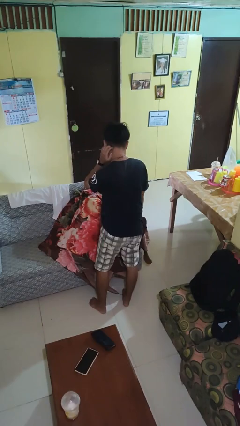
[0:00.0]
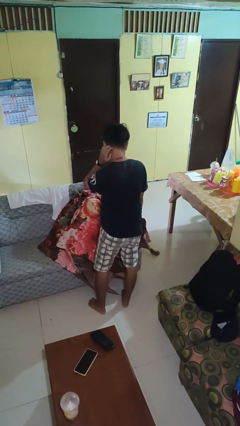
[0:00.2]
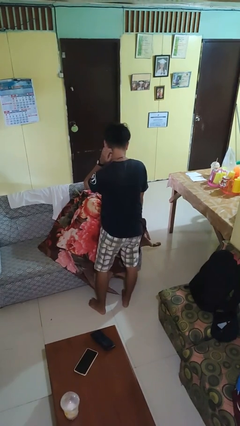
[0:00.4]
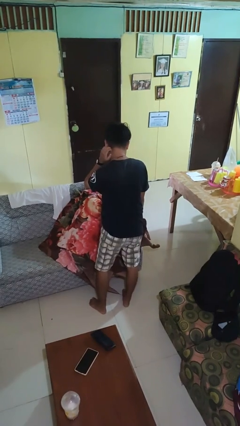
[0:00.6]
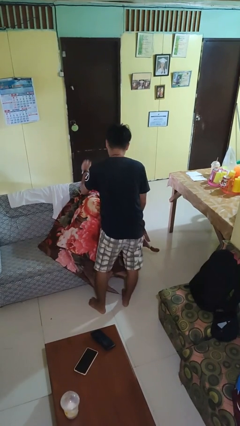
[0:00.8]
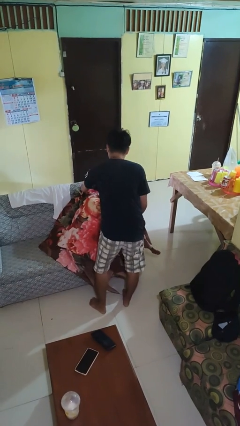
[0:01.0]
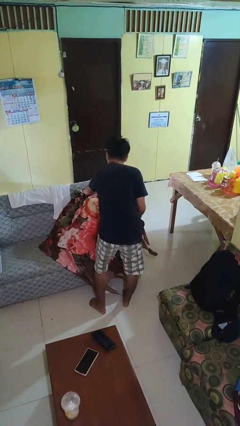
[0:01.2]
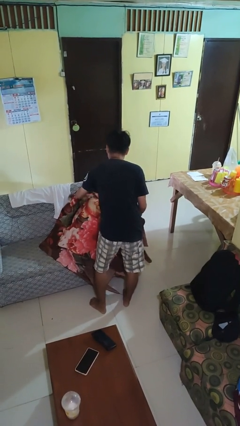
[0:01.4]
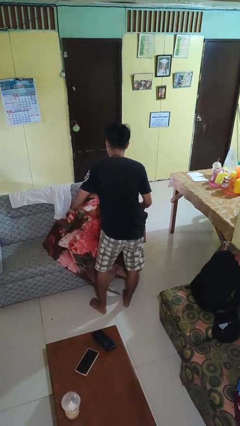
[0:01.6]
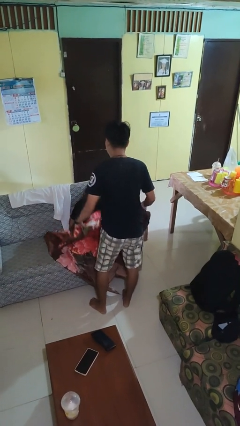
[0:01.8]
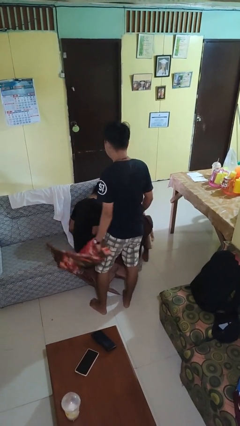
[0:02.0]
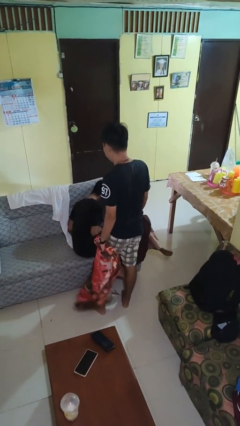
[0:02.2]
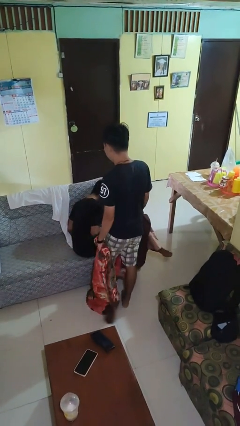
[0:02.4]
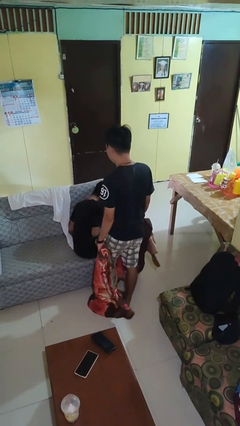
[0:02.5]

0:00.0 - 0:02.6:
person uncovers friend with blanket

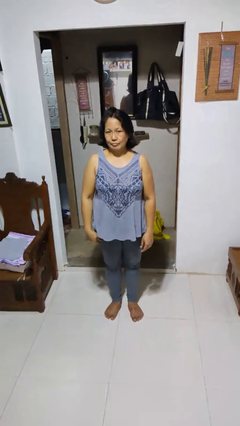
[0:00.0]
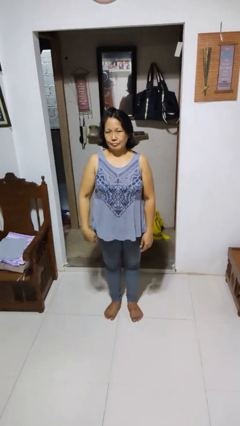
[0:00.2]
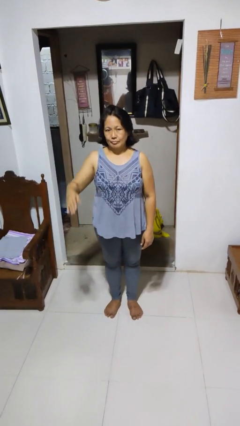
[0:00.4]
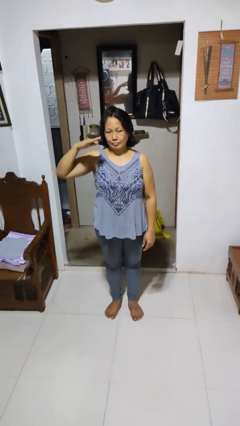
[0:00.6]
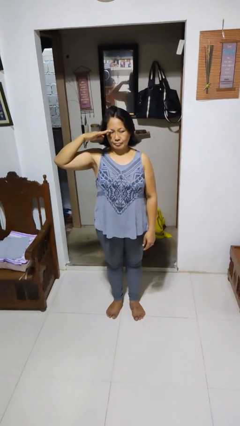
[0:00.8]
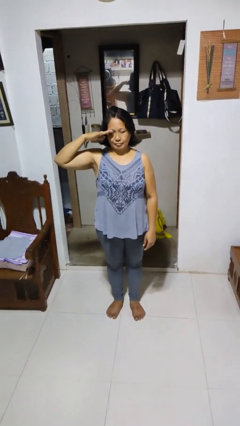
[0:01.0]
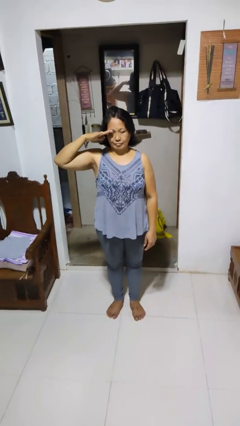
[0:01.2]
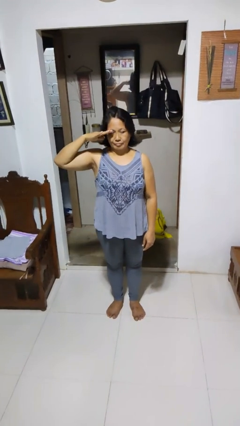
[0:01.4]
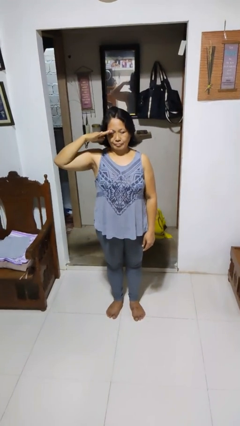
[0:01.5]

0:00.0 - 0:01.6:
person salutes

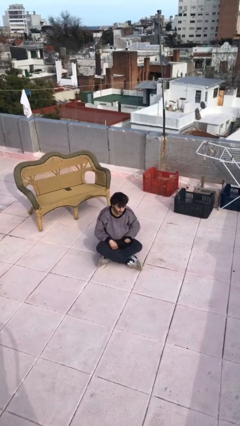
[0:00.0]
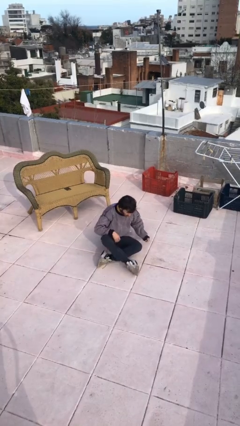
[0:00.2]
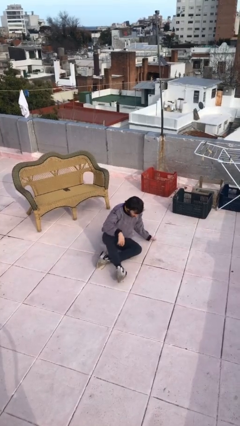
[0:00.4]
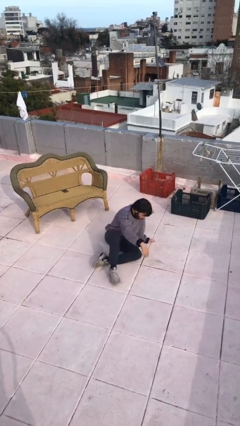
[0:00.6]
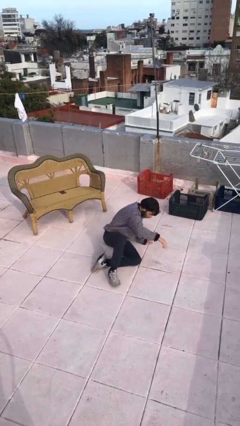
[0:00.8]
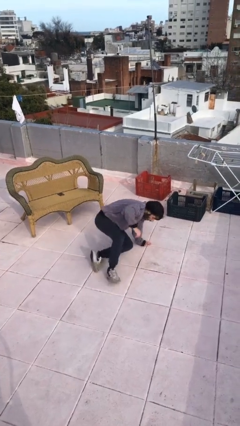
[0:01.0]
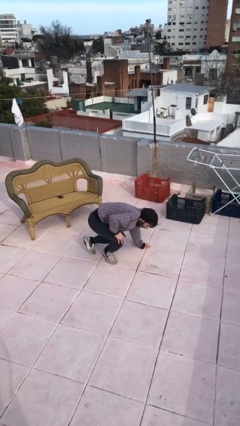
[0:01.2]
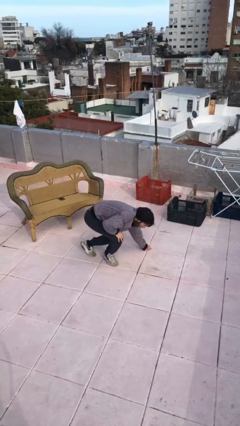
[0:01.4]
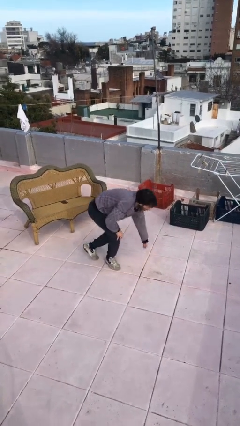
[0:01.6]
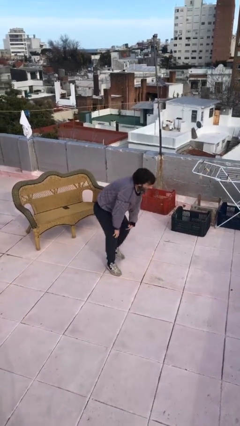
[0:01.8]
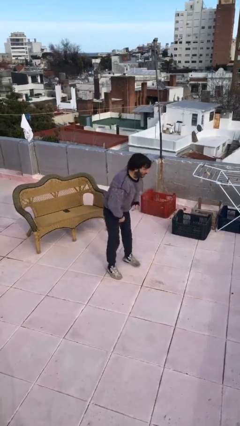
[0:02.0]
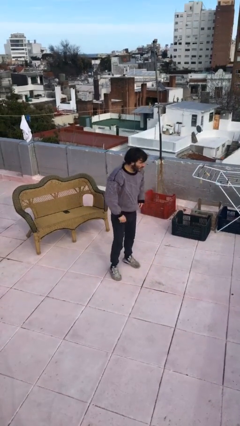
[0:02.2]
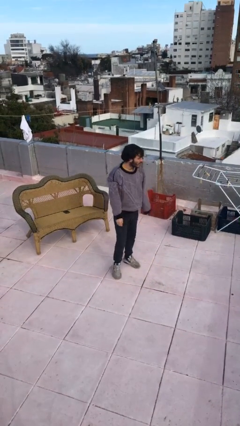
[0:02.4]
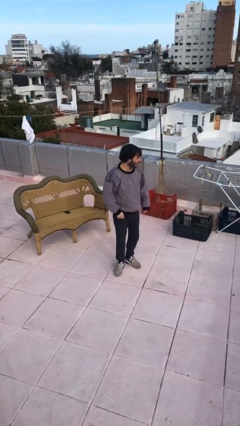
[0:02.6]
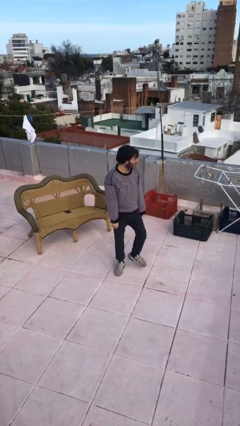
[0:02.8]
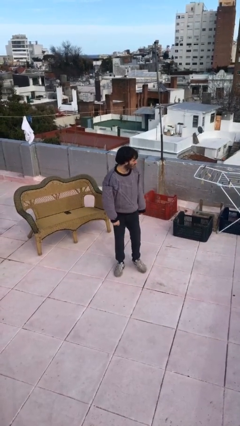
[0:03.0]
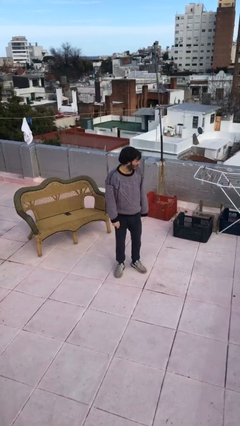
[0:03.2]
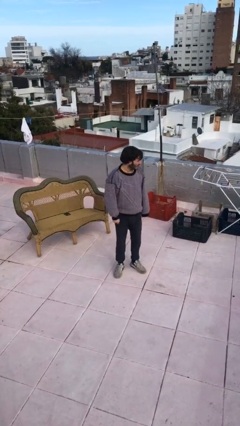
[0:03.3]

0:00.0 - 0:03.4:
person stands up from floor

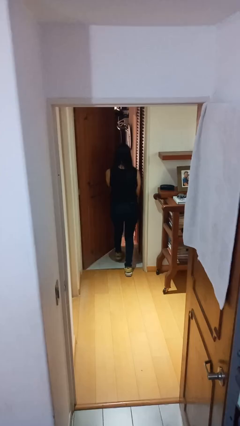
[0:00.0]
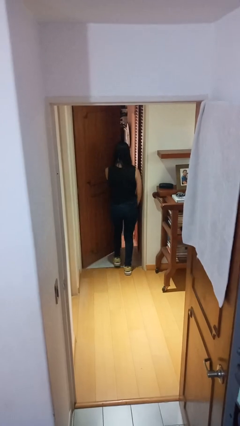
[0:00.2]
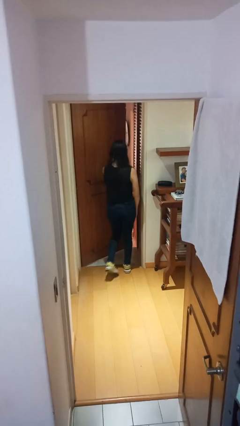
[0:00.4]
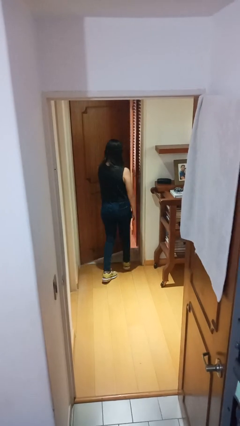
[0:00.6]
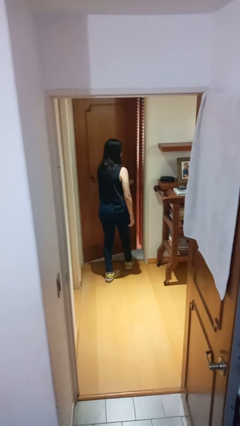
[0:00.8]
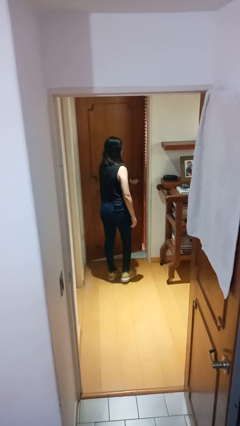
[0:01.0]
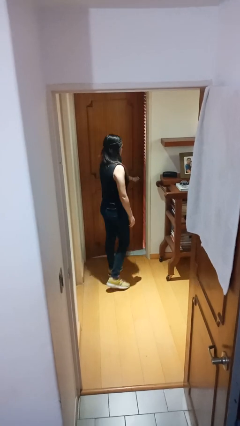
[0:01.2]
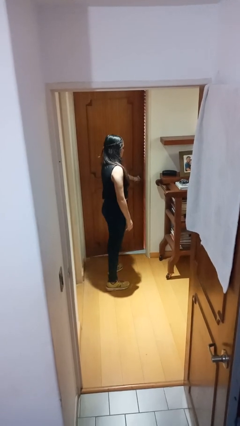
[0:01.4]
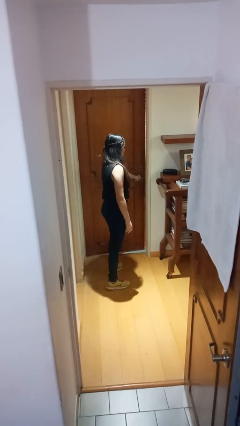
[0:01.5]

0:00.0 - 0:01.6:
person closes facility door

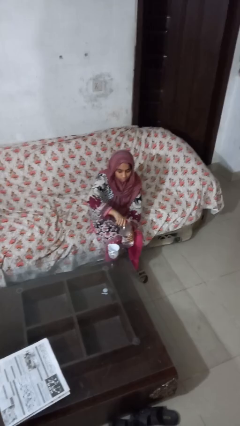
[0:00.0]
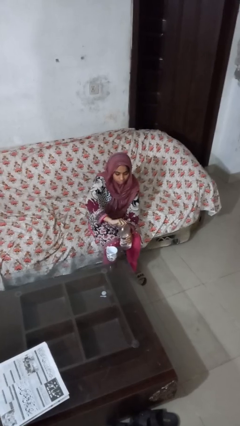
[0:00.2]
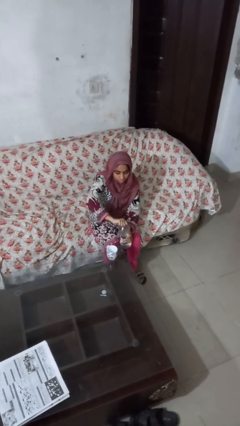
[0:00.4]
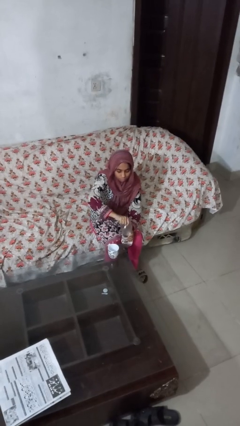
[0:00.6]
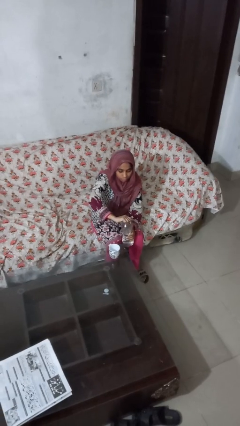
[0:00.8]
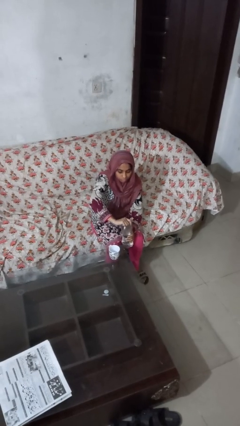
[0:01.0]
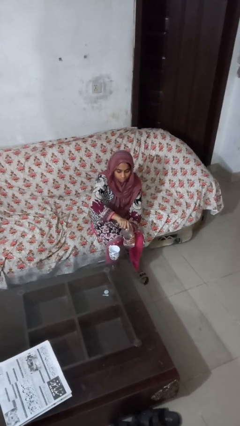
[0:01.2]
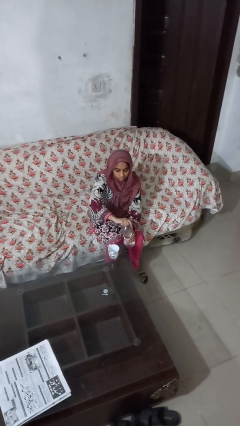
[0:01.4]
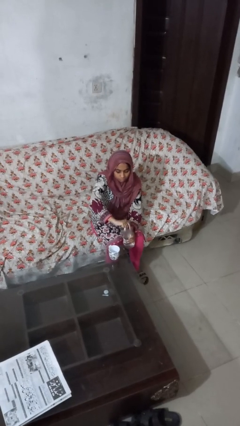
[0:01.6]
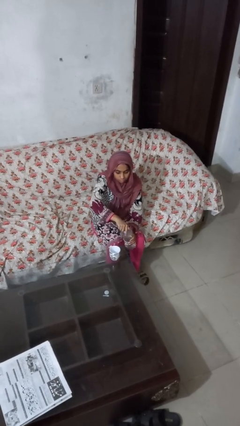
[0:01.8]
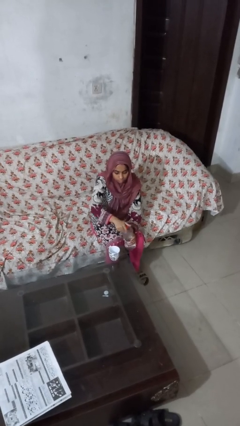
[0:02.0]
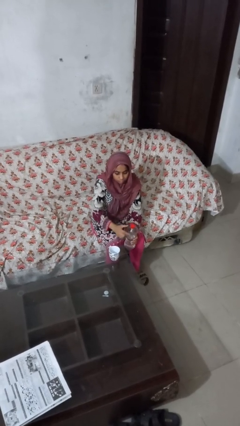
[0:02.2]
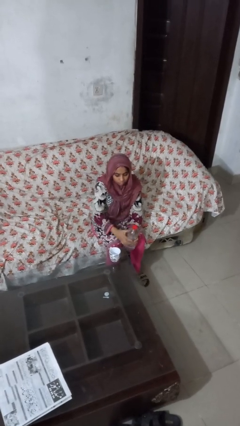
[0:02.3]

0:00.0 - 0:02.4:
person screws lid to bottle

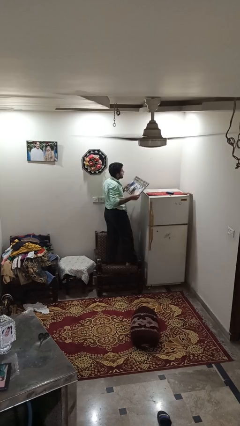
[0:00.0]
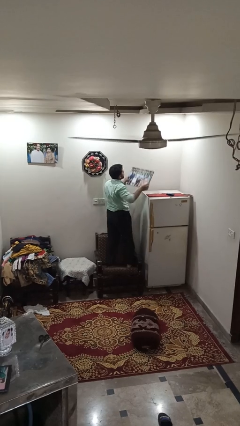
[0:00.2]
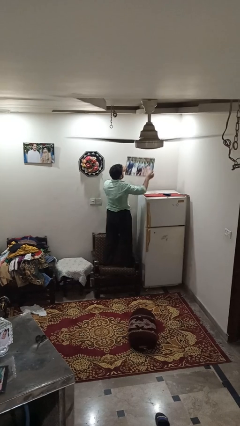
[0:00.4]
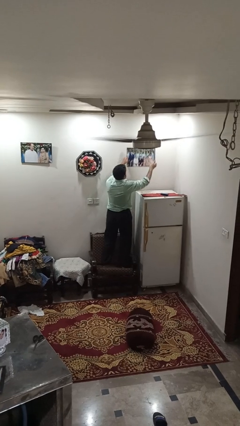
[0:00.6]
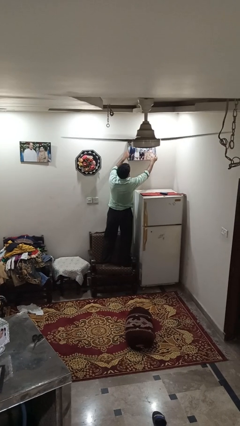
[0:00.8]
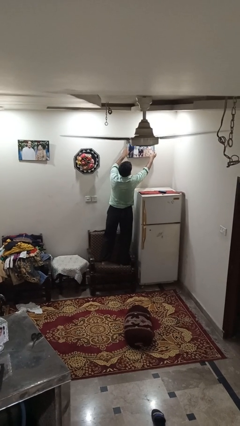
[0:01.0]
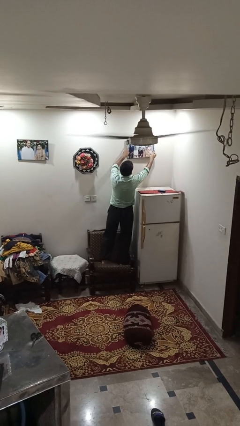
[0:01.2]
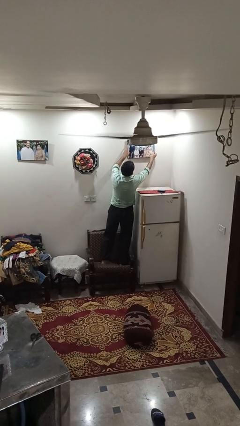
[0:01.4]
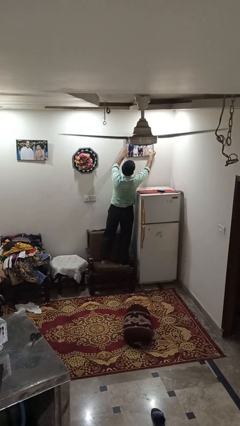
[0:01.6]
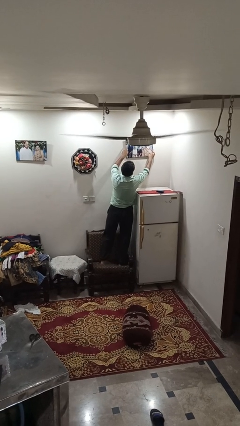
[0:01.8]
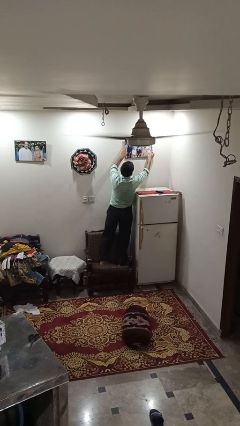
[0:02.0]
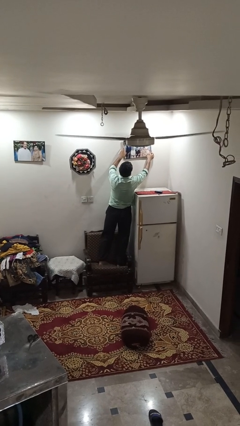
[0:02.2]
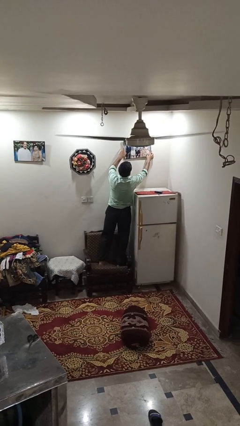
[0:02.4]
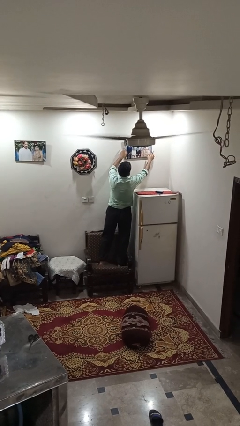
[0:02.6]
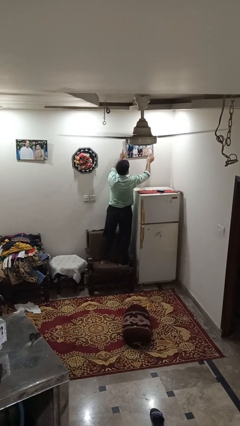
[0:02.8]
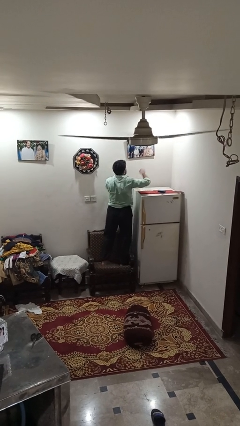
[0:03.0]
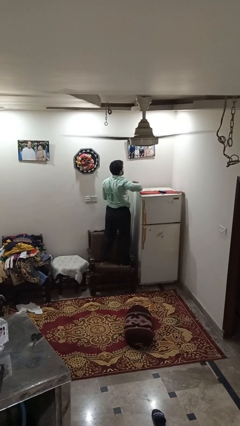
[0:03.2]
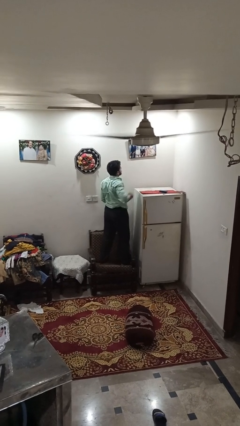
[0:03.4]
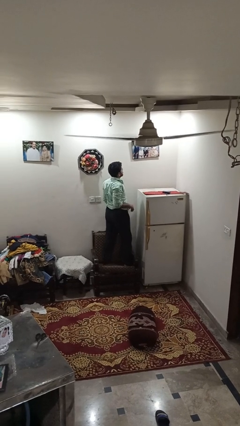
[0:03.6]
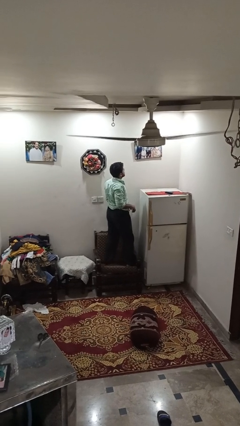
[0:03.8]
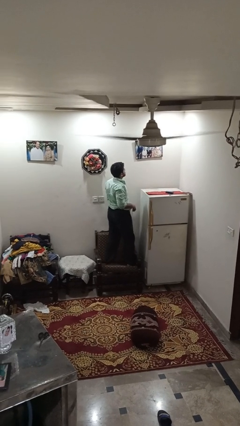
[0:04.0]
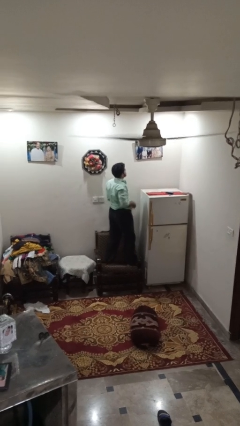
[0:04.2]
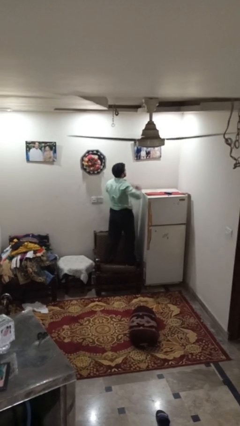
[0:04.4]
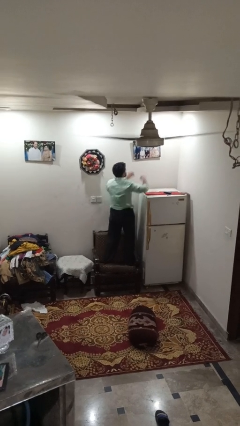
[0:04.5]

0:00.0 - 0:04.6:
person puts up picture frame

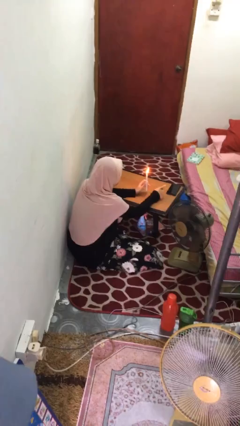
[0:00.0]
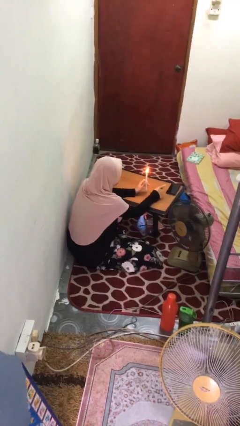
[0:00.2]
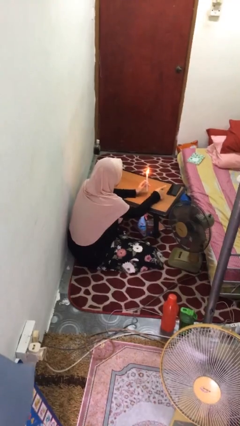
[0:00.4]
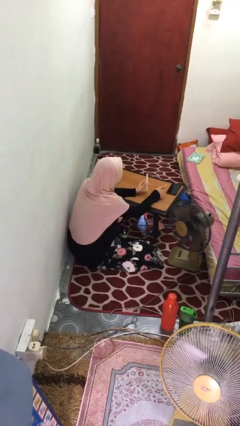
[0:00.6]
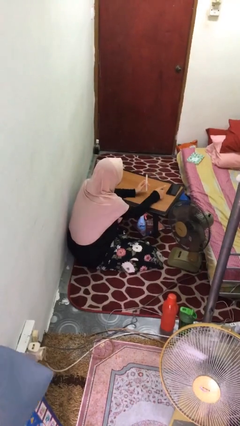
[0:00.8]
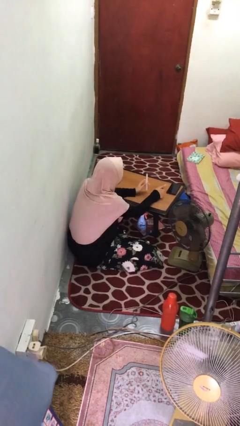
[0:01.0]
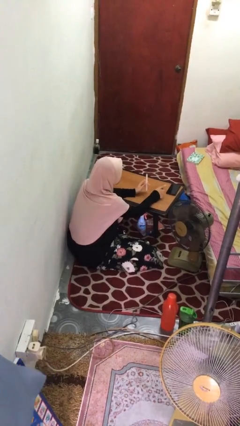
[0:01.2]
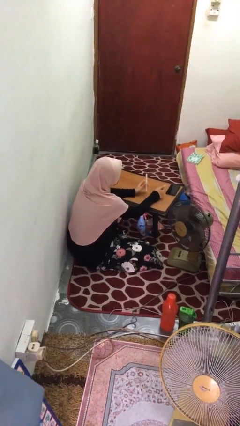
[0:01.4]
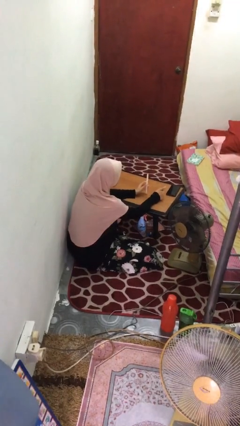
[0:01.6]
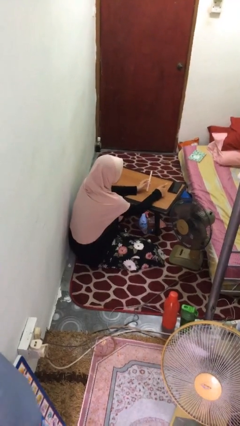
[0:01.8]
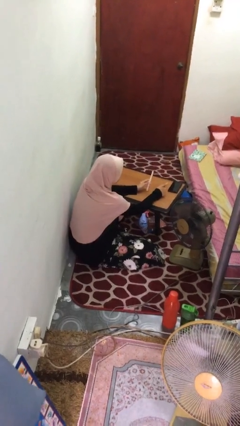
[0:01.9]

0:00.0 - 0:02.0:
person extinguishes candle
